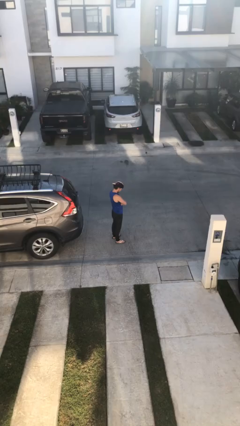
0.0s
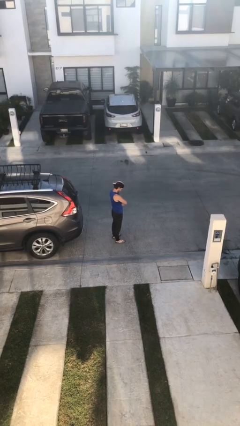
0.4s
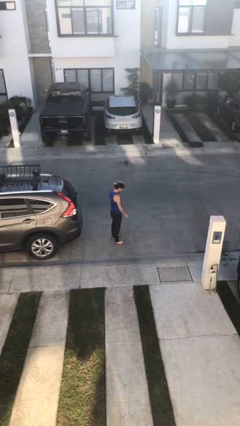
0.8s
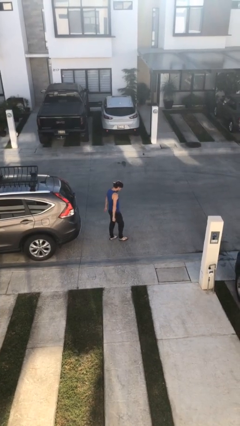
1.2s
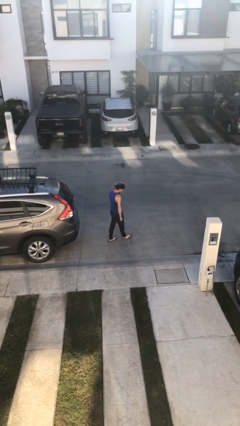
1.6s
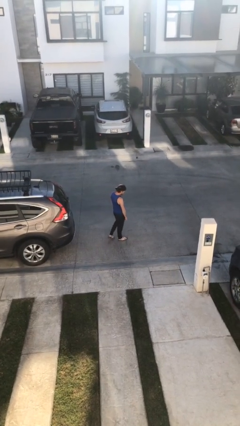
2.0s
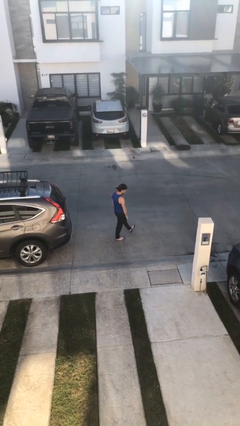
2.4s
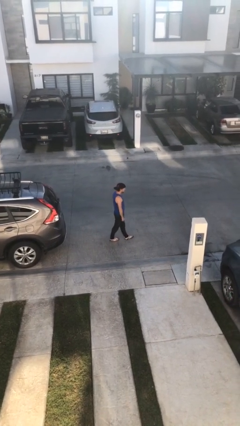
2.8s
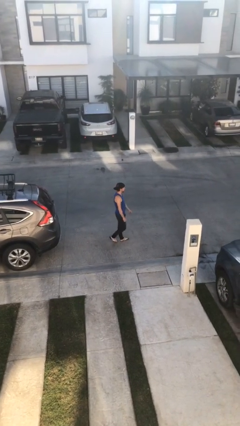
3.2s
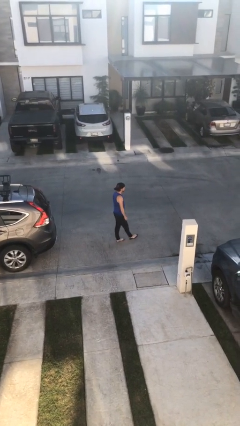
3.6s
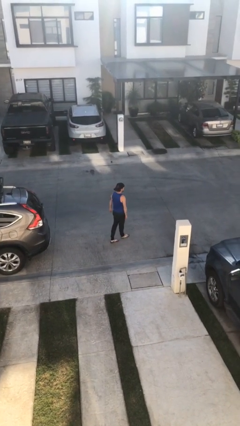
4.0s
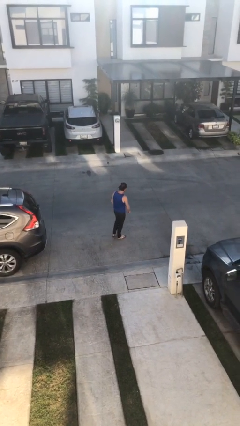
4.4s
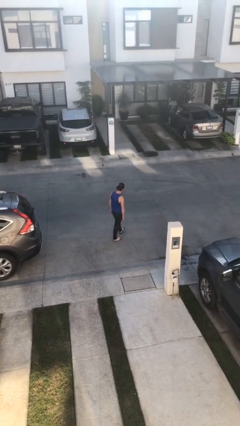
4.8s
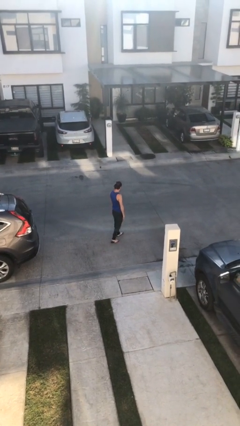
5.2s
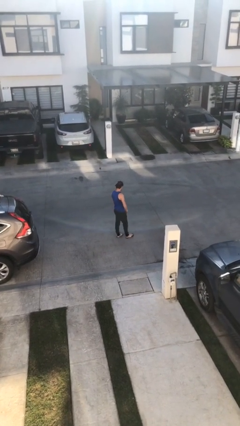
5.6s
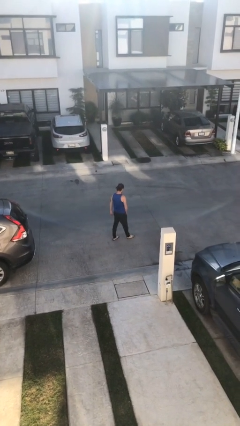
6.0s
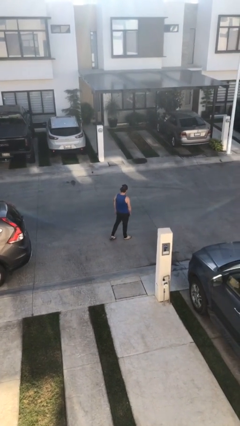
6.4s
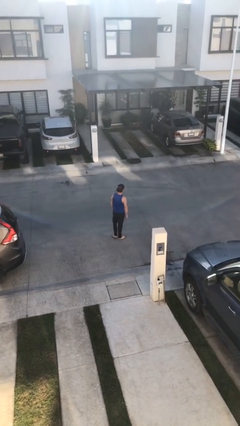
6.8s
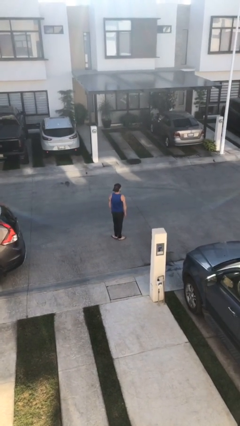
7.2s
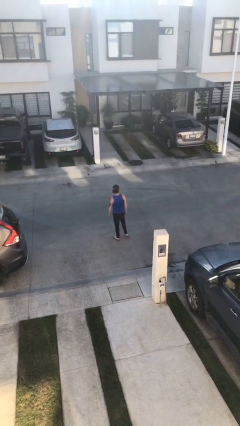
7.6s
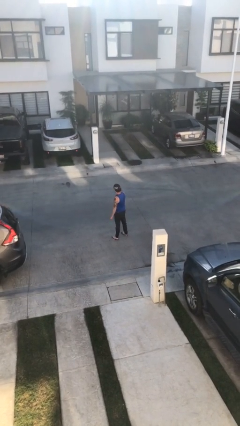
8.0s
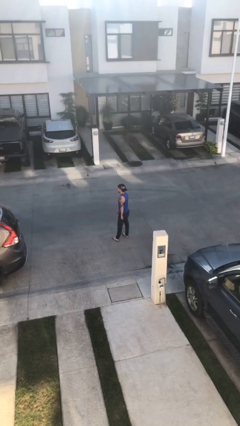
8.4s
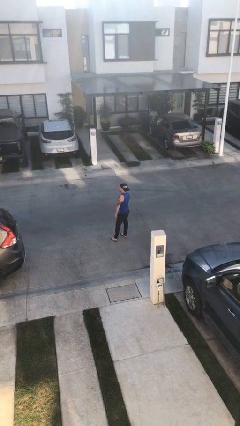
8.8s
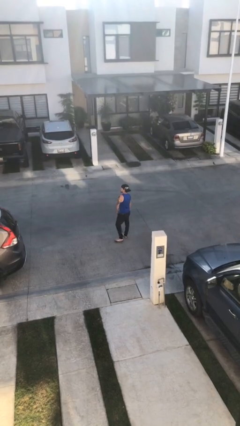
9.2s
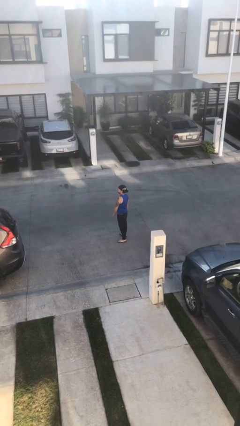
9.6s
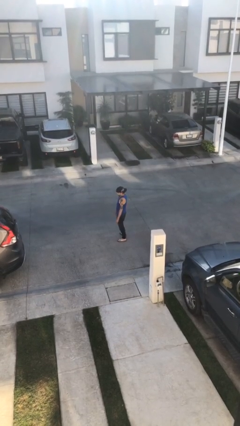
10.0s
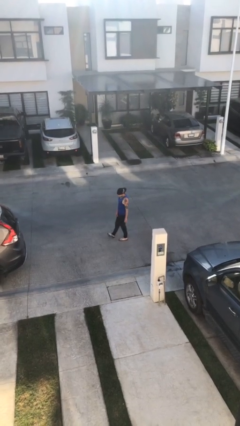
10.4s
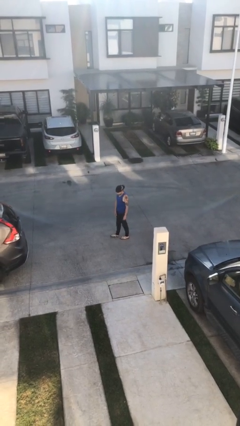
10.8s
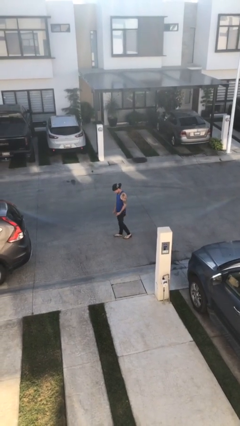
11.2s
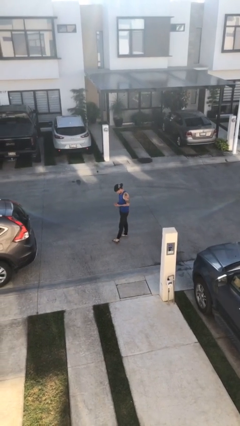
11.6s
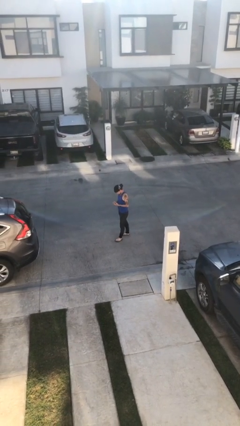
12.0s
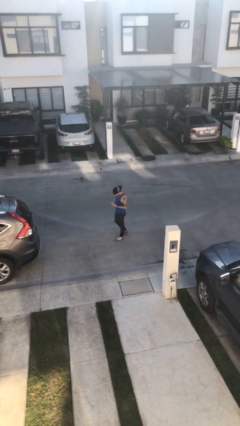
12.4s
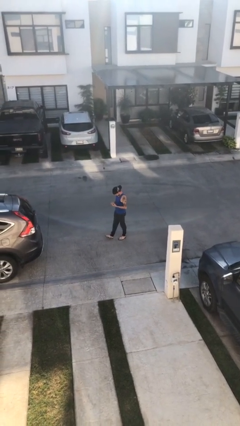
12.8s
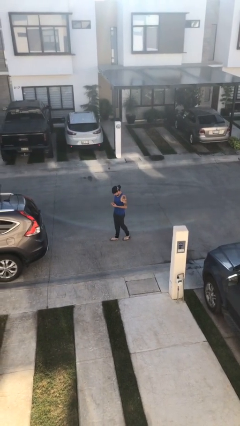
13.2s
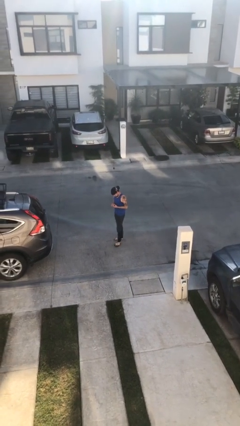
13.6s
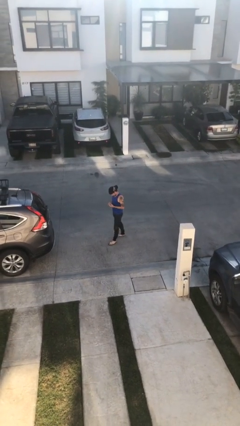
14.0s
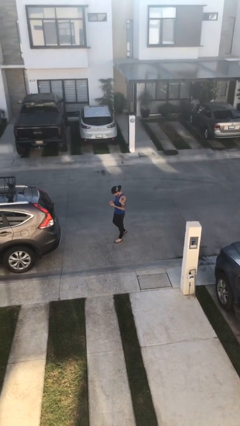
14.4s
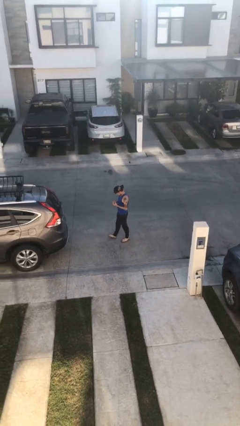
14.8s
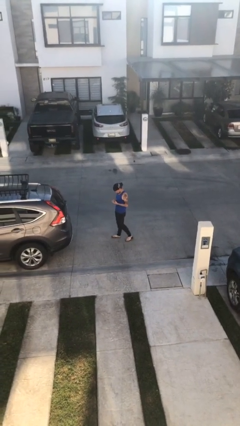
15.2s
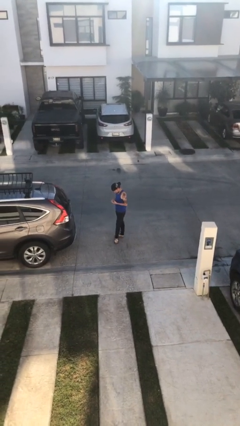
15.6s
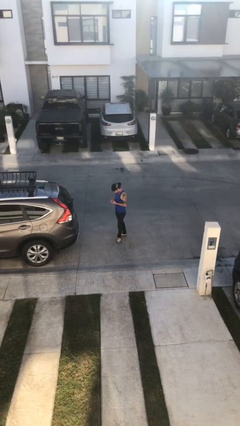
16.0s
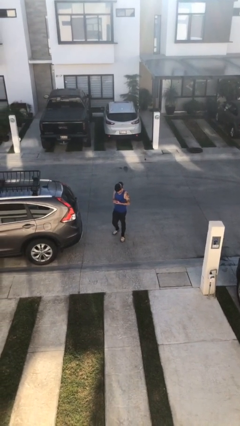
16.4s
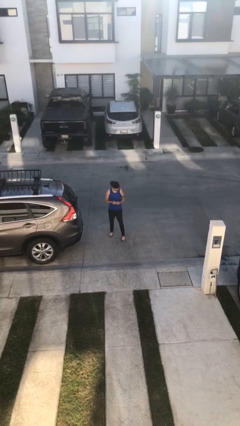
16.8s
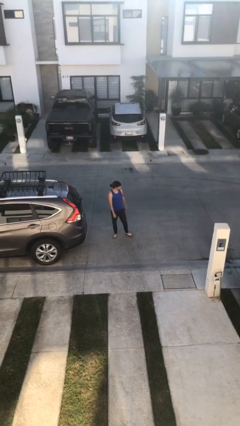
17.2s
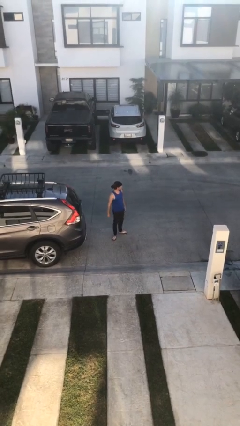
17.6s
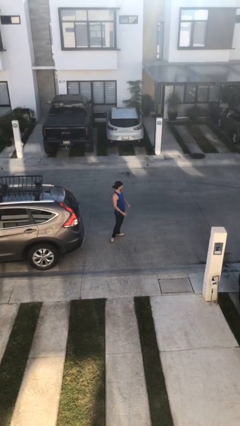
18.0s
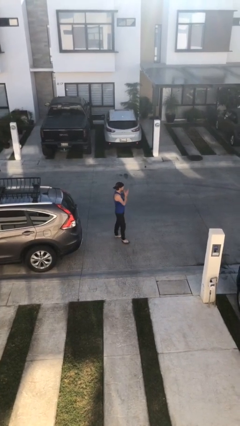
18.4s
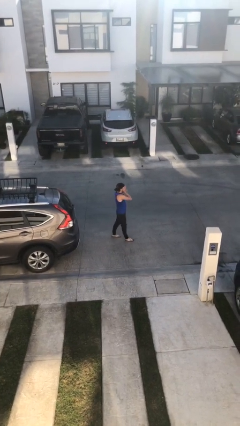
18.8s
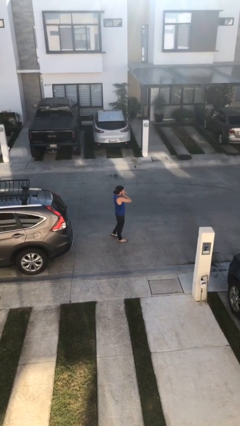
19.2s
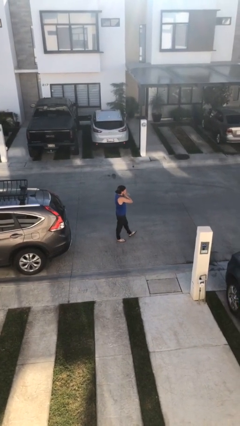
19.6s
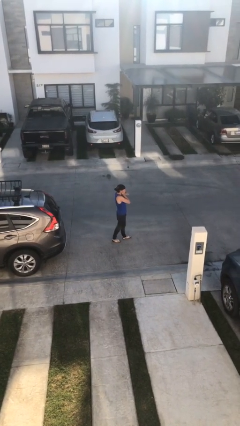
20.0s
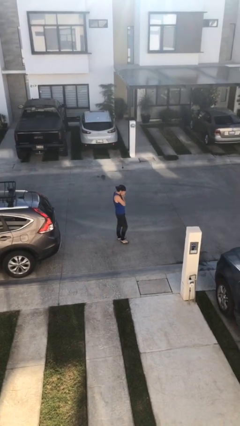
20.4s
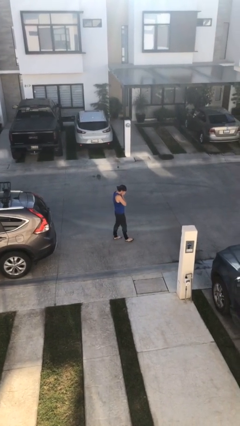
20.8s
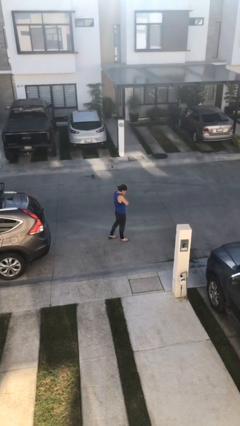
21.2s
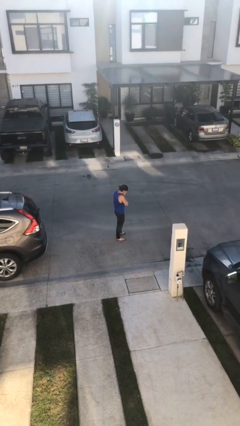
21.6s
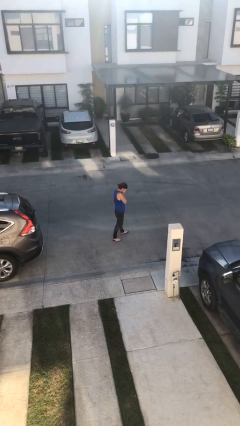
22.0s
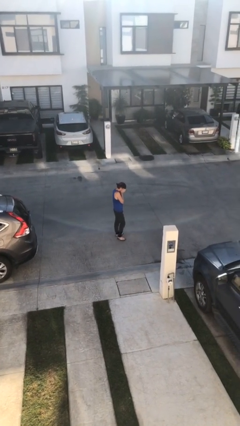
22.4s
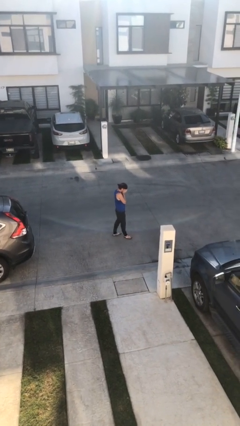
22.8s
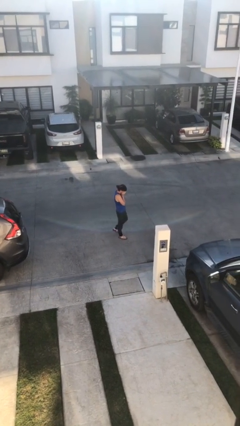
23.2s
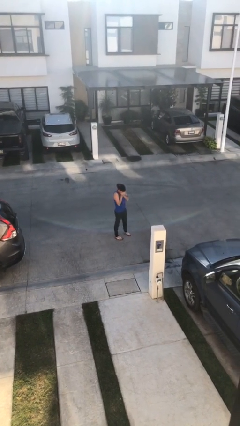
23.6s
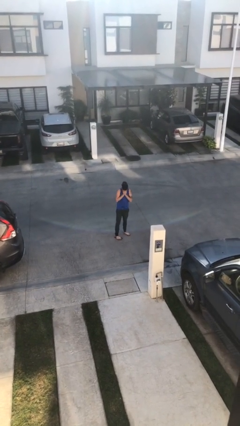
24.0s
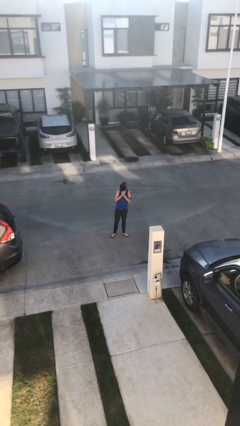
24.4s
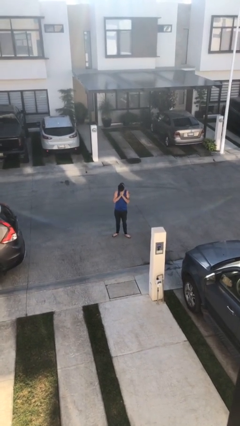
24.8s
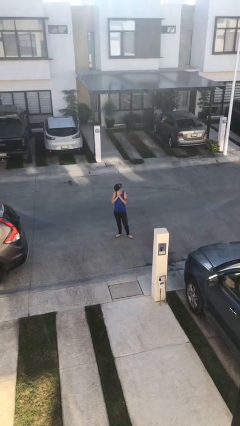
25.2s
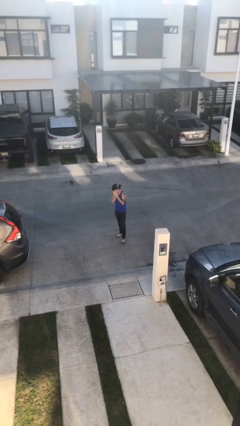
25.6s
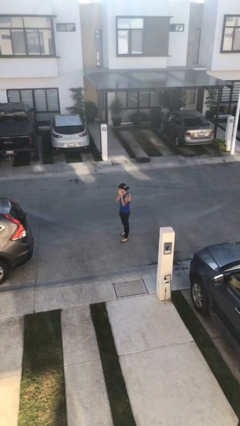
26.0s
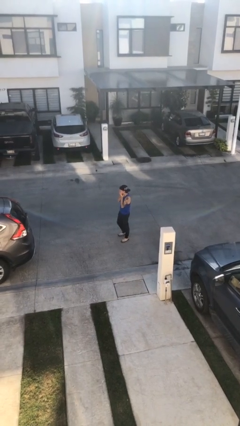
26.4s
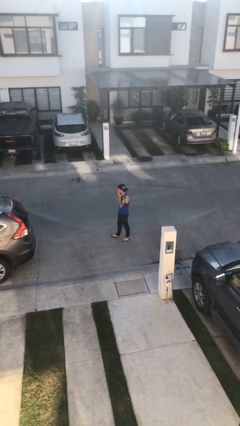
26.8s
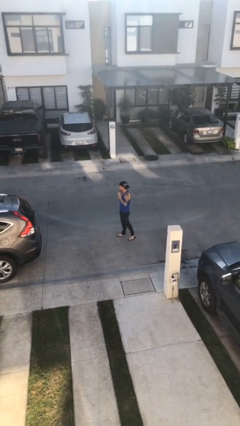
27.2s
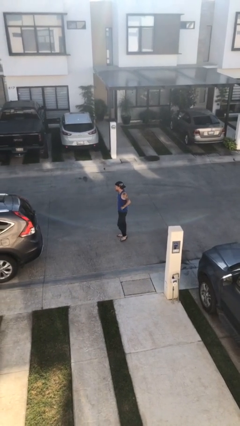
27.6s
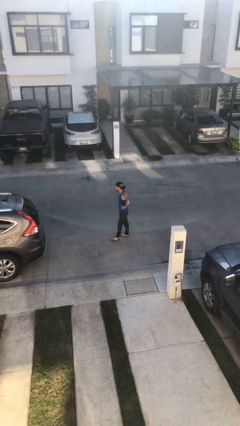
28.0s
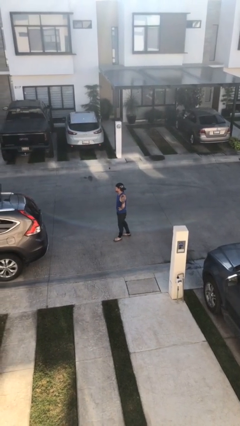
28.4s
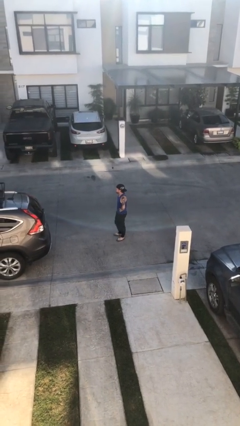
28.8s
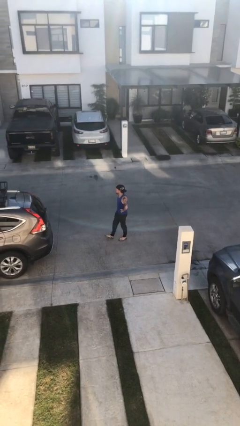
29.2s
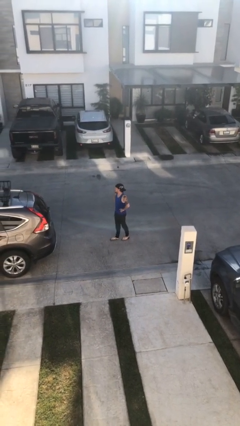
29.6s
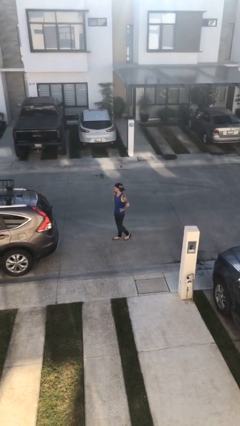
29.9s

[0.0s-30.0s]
person walks

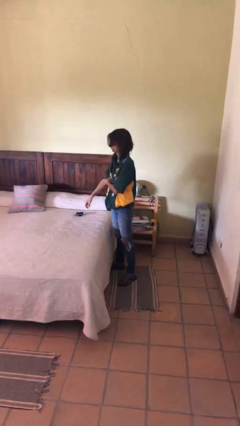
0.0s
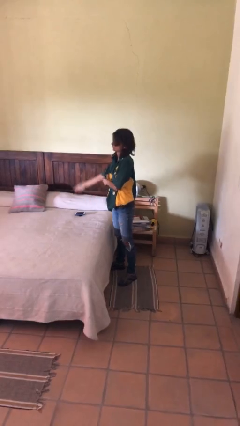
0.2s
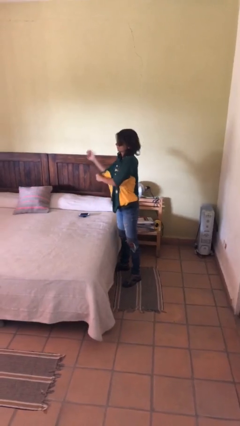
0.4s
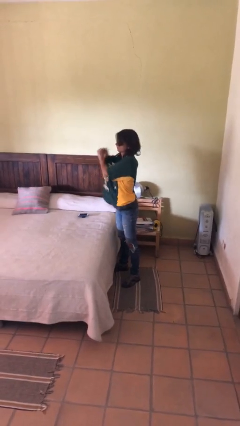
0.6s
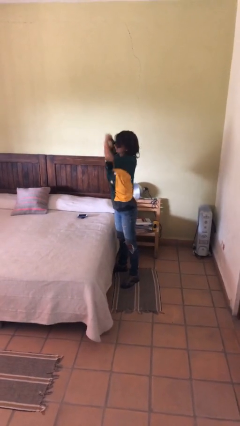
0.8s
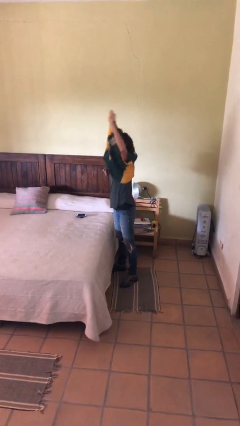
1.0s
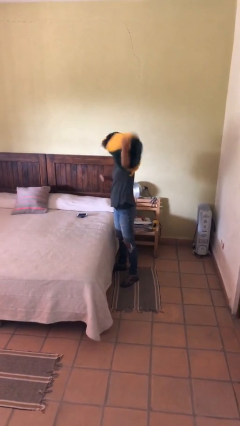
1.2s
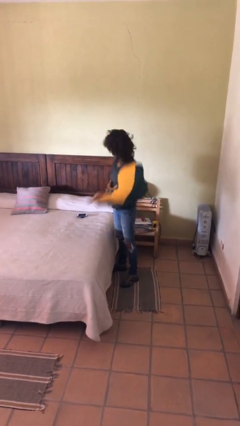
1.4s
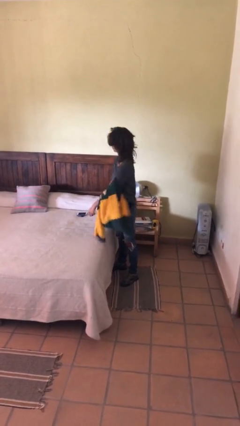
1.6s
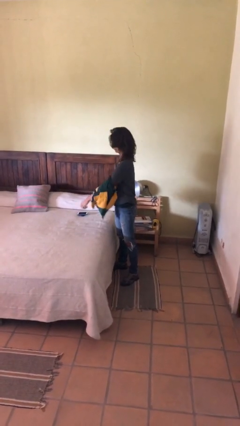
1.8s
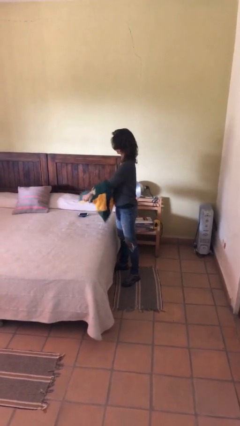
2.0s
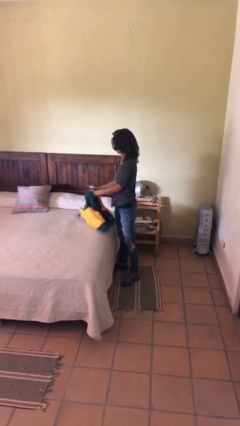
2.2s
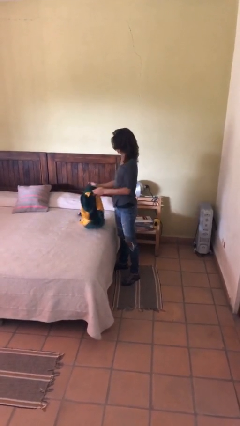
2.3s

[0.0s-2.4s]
person takes off shirt

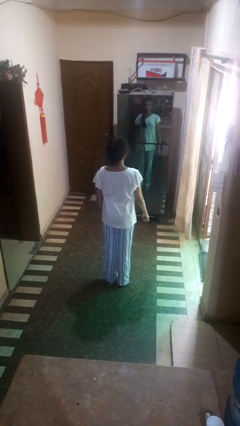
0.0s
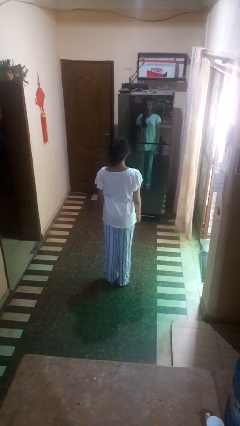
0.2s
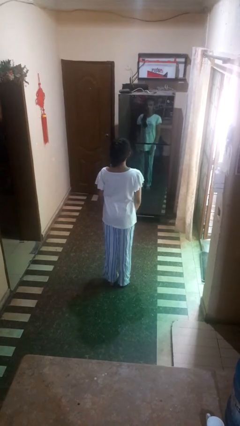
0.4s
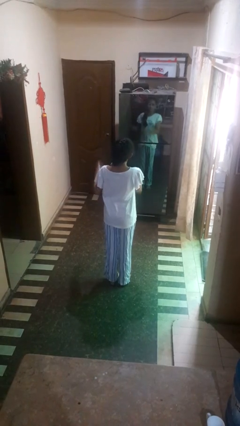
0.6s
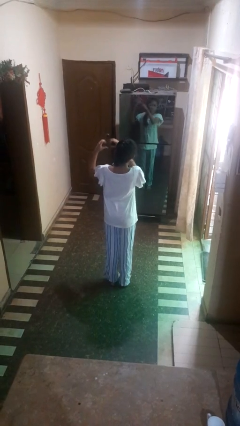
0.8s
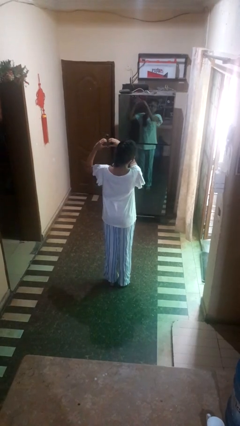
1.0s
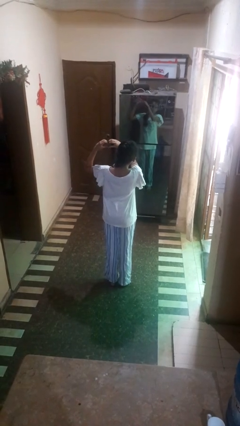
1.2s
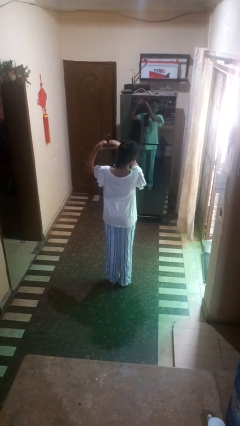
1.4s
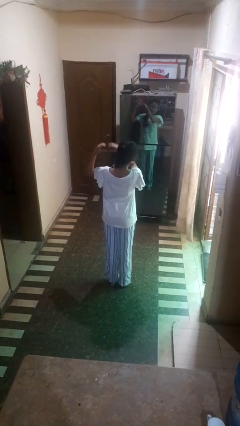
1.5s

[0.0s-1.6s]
person gestures heart
